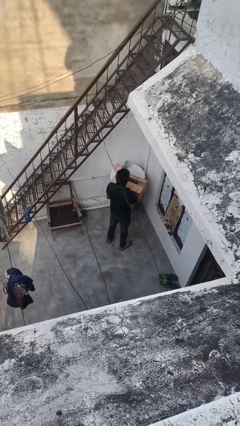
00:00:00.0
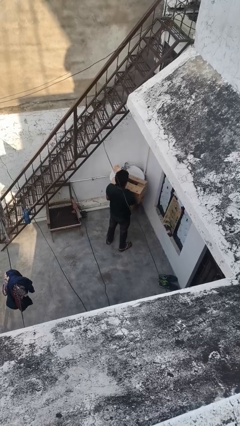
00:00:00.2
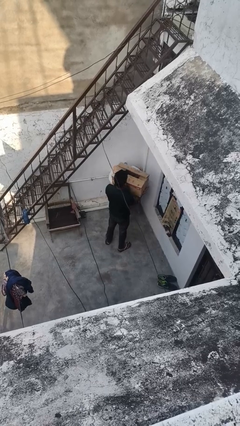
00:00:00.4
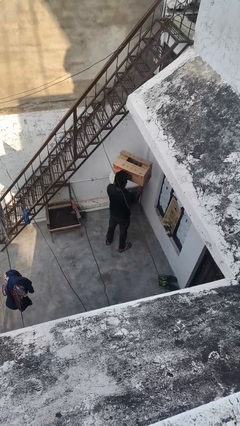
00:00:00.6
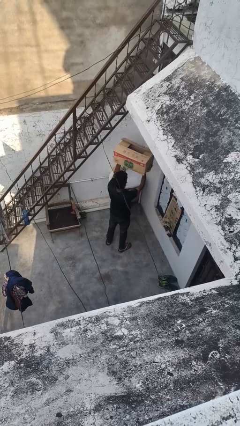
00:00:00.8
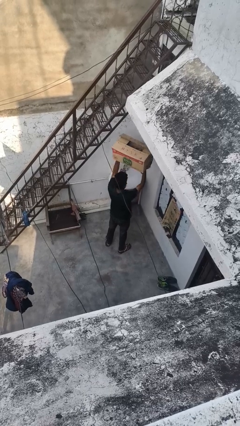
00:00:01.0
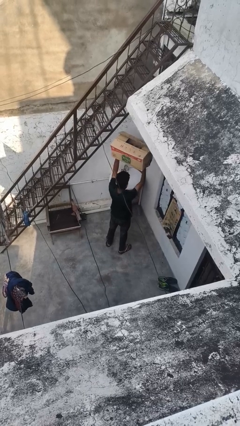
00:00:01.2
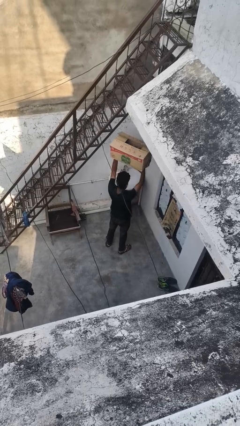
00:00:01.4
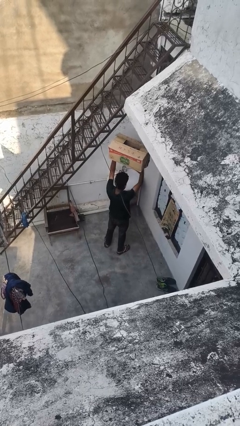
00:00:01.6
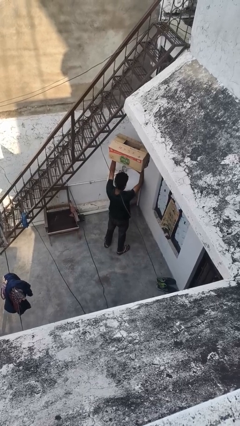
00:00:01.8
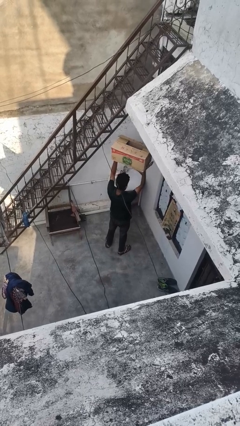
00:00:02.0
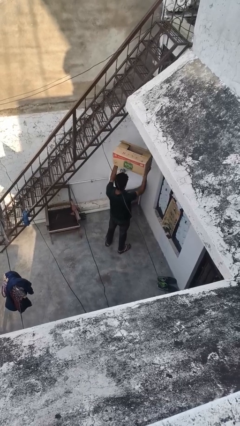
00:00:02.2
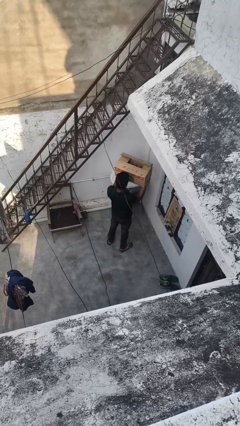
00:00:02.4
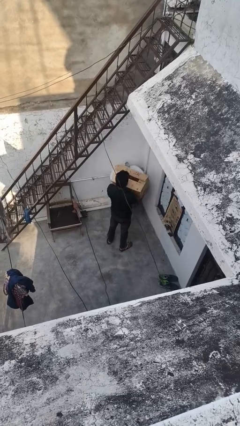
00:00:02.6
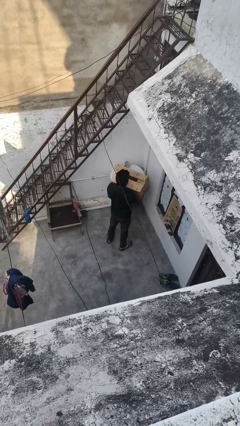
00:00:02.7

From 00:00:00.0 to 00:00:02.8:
person holds object above head

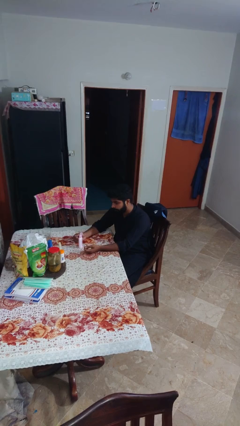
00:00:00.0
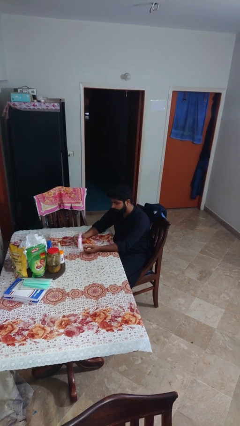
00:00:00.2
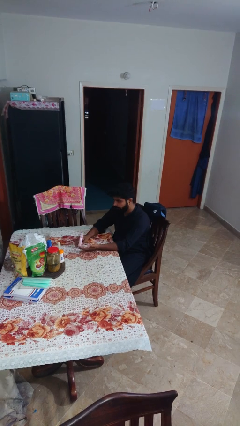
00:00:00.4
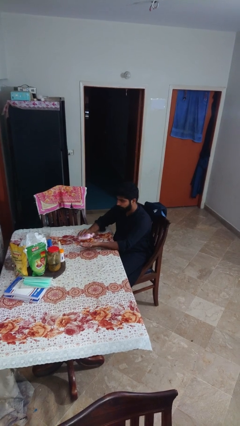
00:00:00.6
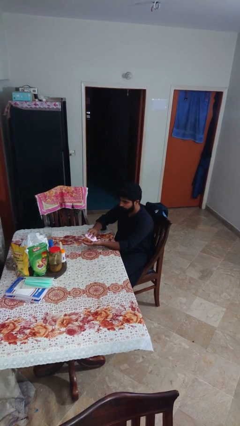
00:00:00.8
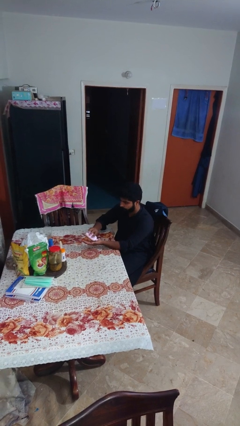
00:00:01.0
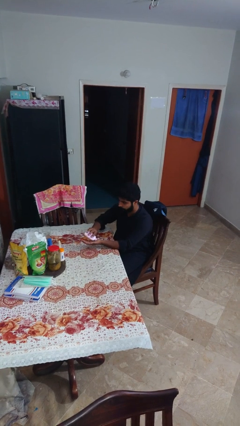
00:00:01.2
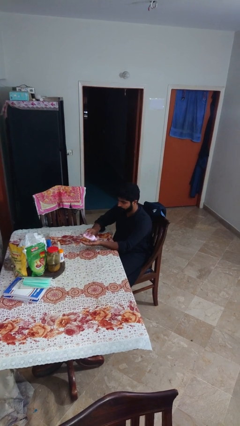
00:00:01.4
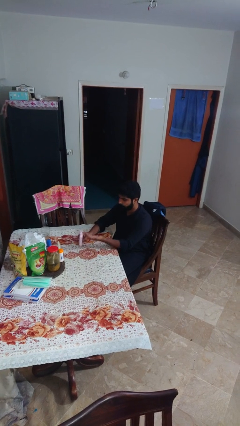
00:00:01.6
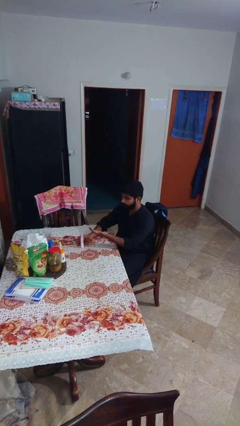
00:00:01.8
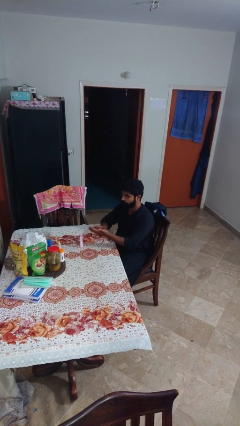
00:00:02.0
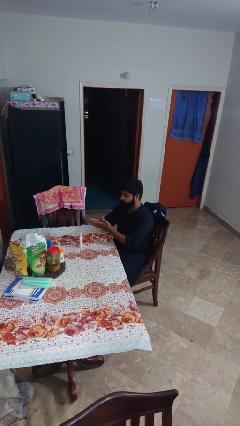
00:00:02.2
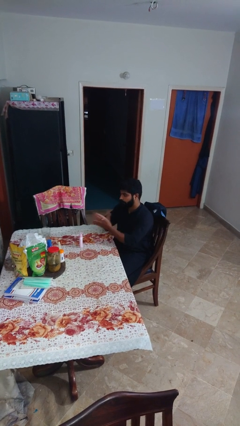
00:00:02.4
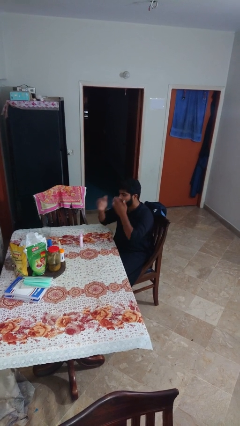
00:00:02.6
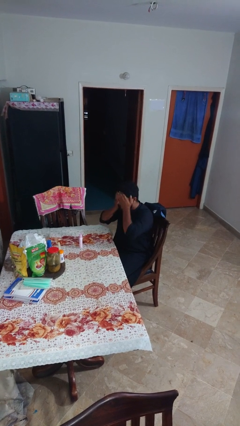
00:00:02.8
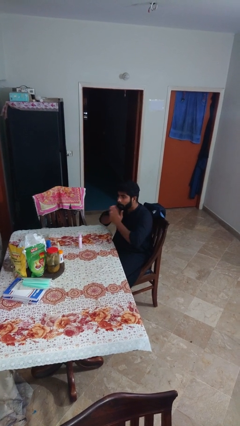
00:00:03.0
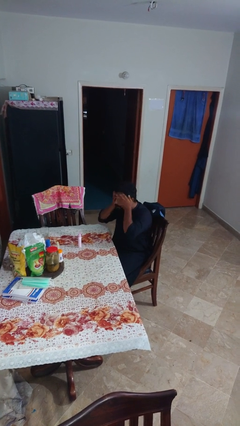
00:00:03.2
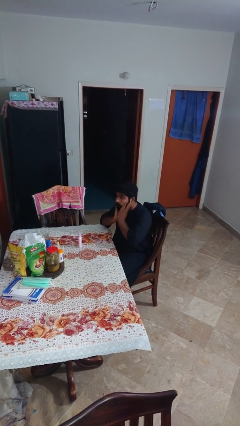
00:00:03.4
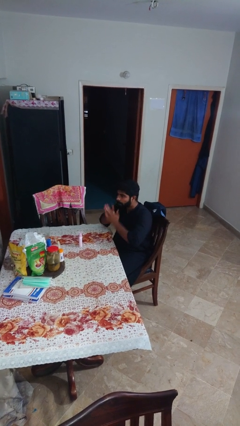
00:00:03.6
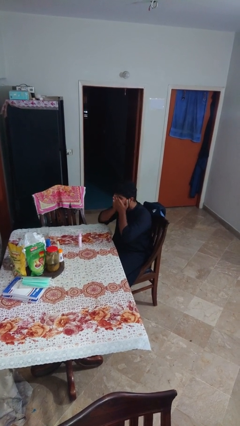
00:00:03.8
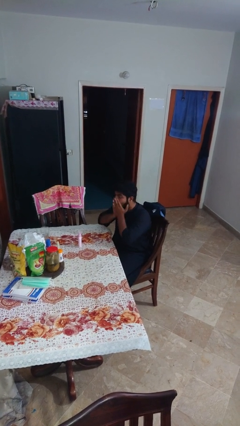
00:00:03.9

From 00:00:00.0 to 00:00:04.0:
person applies facial moisturizer

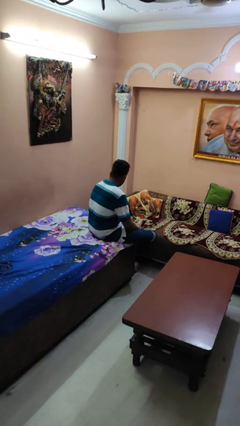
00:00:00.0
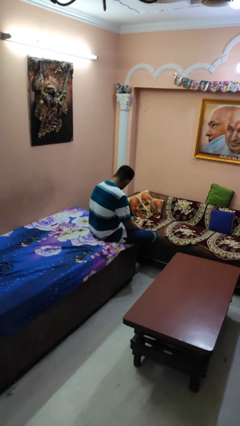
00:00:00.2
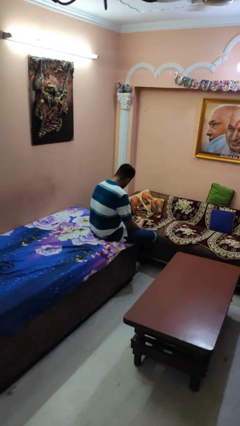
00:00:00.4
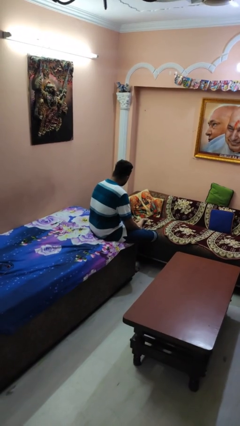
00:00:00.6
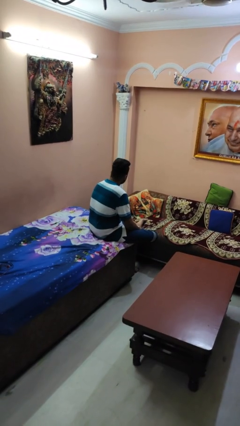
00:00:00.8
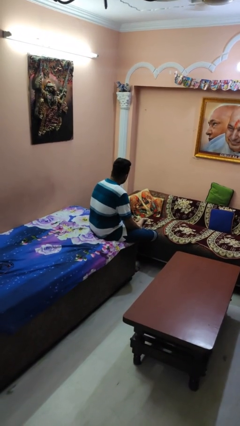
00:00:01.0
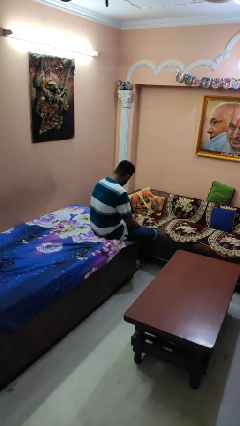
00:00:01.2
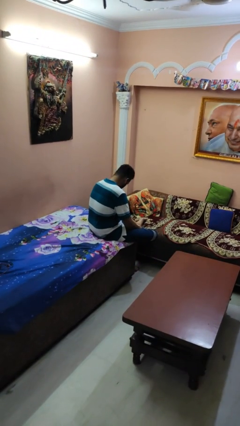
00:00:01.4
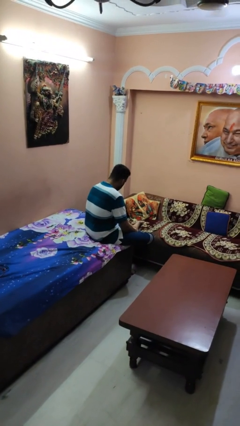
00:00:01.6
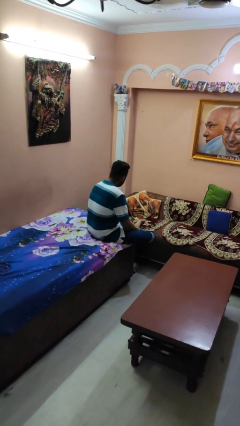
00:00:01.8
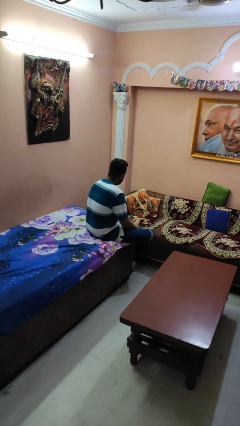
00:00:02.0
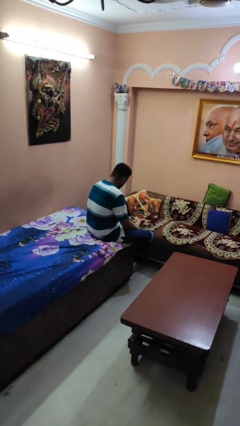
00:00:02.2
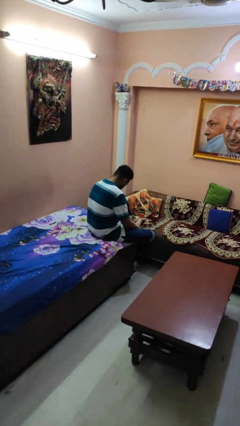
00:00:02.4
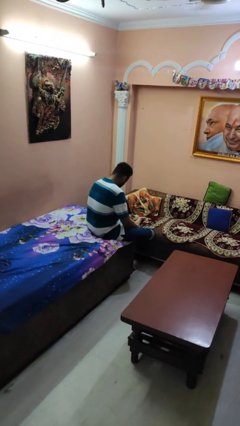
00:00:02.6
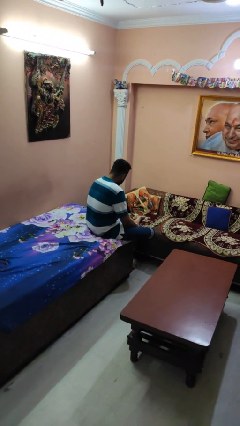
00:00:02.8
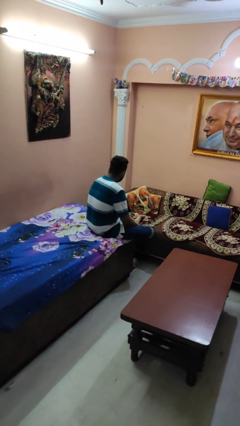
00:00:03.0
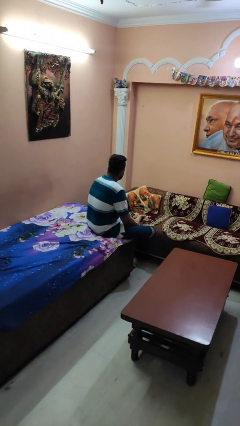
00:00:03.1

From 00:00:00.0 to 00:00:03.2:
person nods head

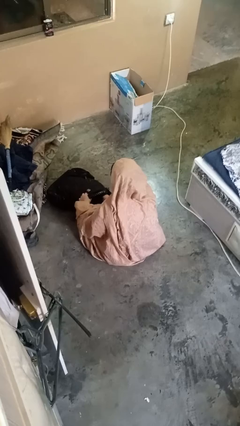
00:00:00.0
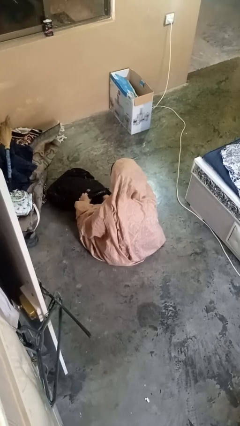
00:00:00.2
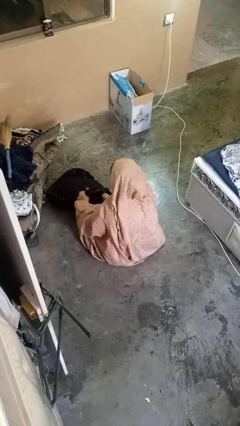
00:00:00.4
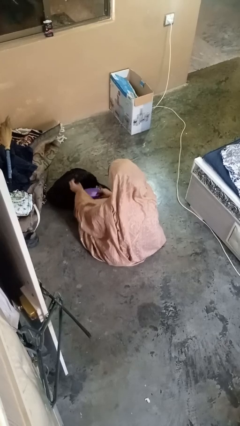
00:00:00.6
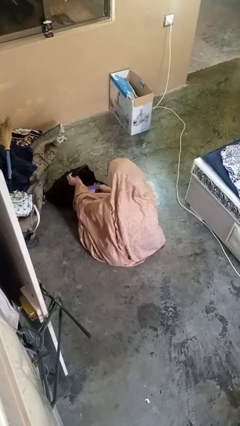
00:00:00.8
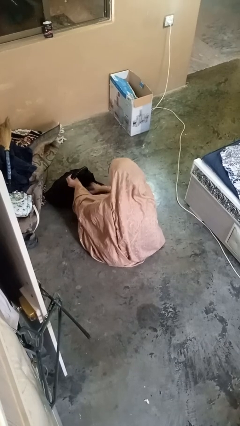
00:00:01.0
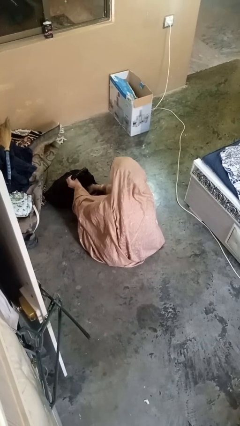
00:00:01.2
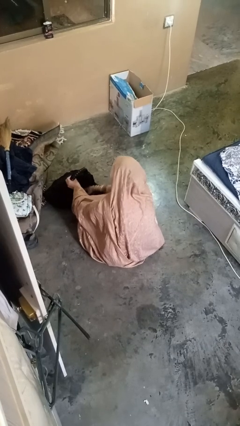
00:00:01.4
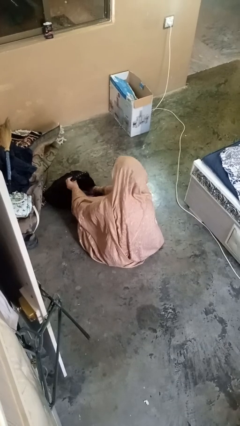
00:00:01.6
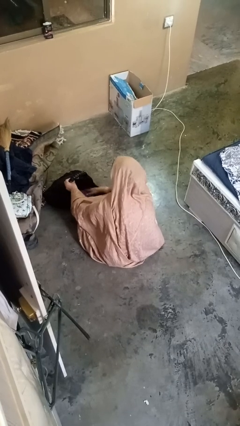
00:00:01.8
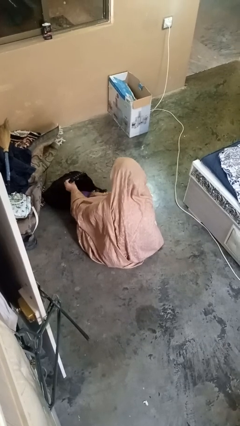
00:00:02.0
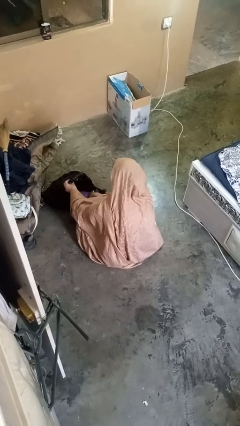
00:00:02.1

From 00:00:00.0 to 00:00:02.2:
person searches in backpack

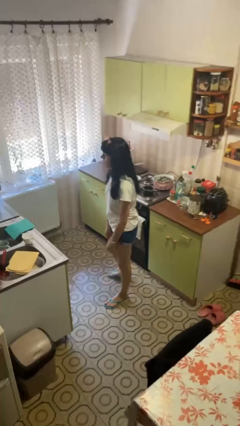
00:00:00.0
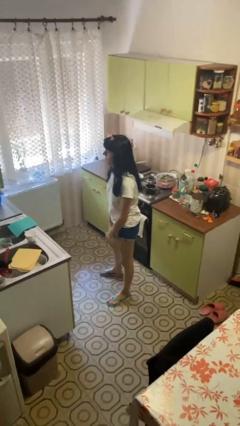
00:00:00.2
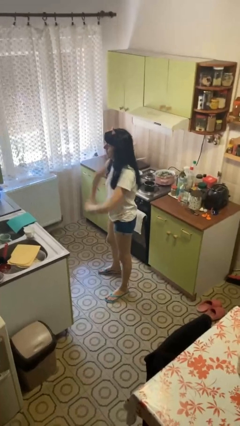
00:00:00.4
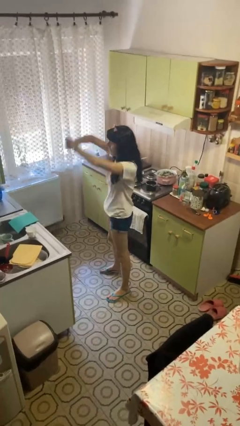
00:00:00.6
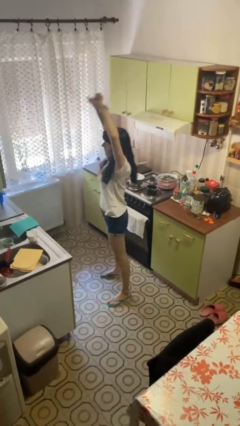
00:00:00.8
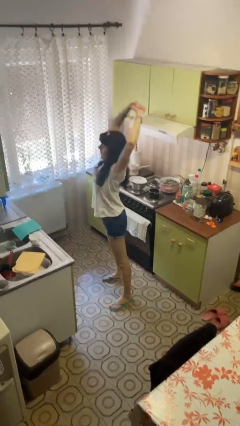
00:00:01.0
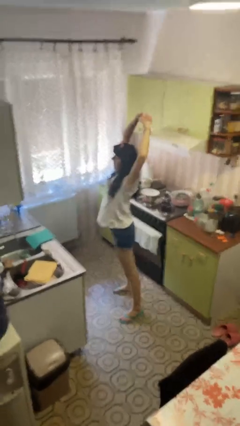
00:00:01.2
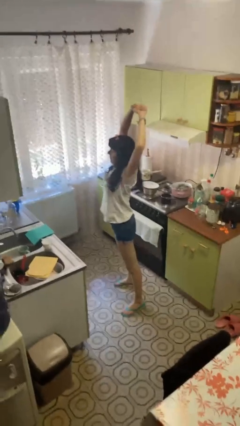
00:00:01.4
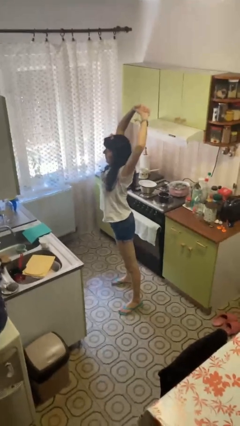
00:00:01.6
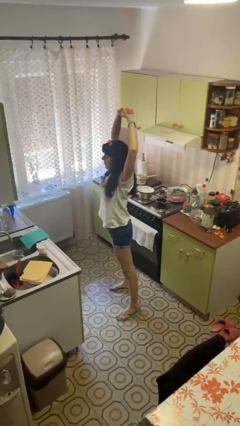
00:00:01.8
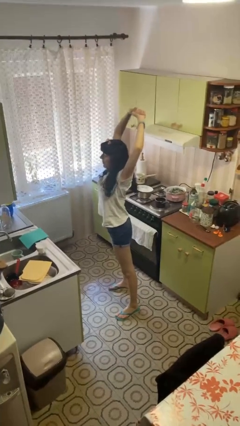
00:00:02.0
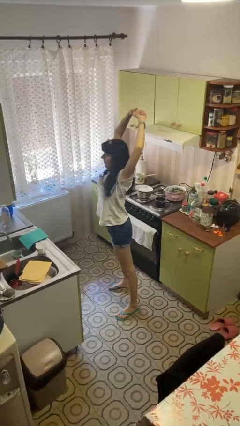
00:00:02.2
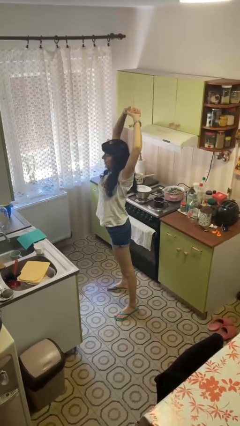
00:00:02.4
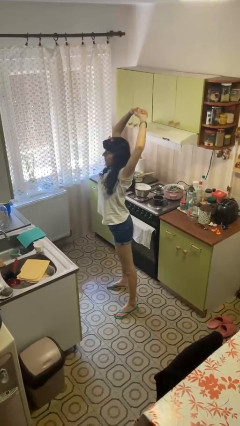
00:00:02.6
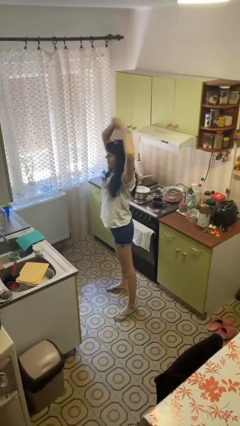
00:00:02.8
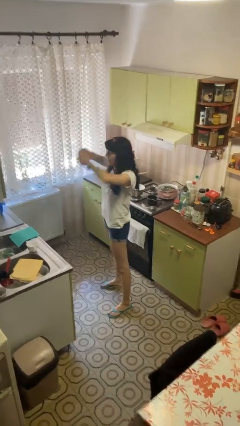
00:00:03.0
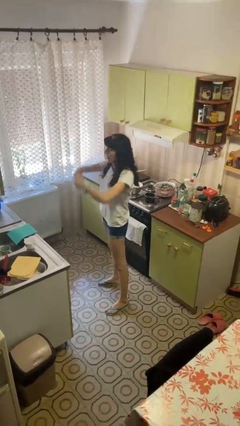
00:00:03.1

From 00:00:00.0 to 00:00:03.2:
person stretches arms over head

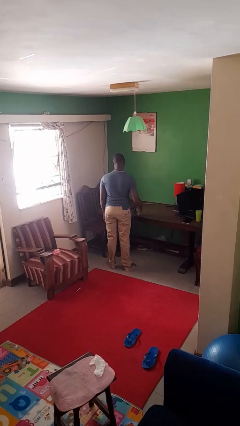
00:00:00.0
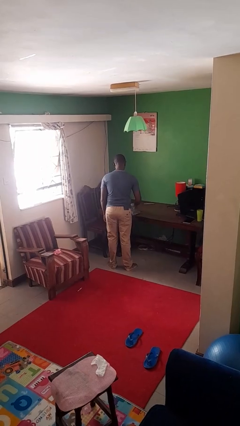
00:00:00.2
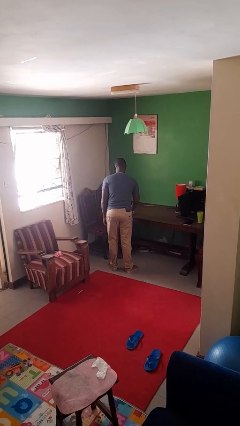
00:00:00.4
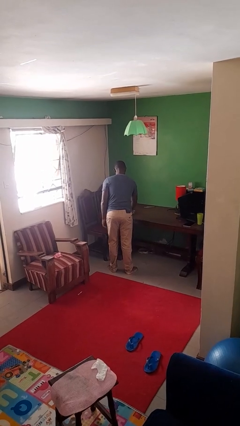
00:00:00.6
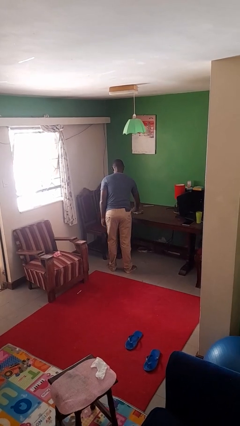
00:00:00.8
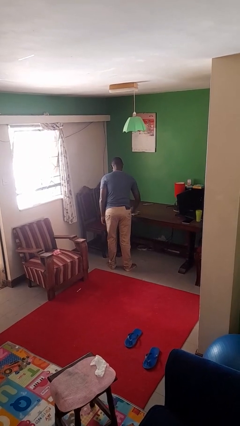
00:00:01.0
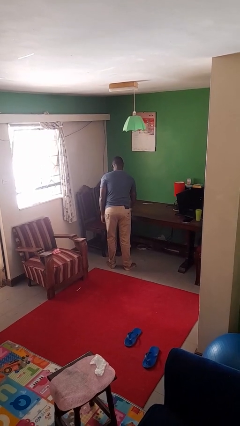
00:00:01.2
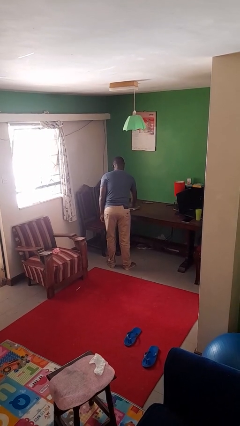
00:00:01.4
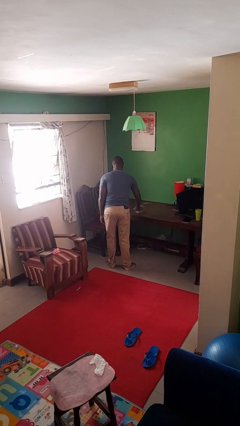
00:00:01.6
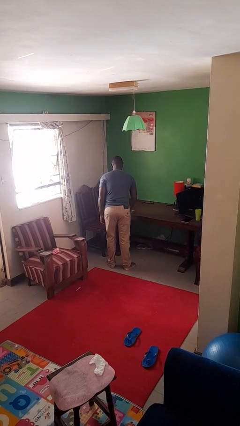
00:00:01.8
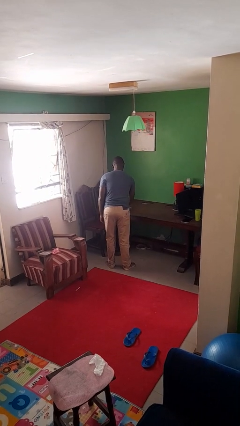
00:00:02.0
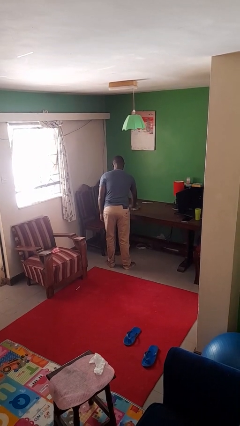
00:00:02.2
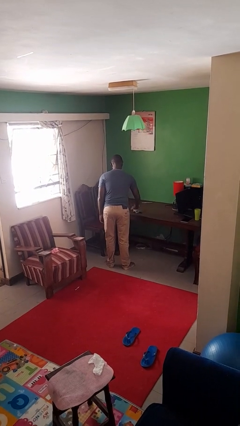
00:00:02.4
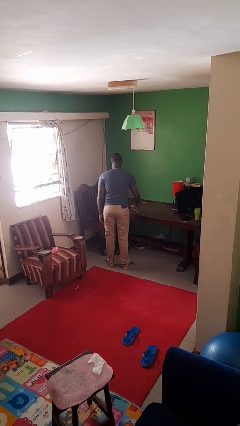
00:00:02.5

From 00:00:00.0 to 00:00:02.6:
person cleans table with rag
